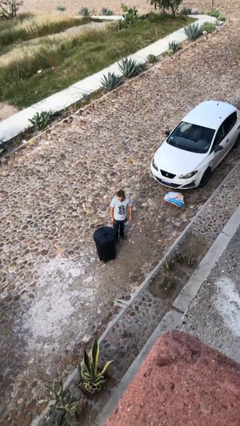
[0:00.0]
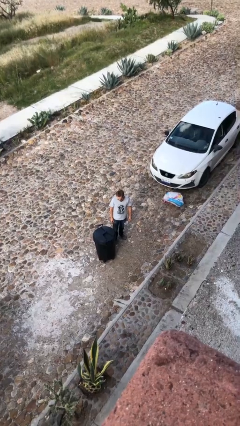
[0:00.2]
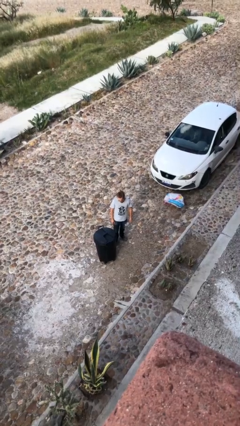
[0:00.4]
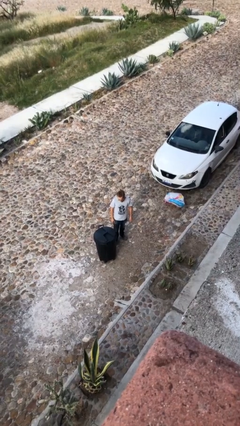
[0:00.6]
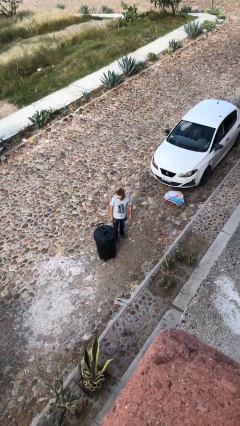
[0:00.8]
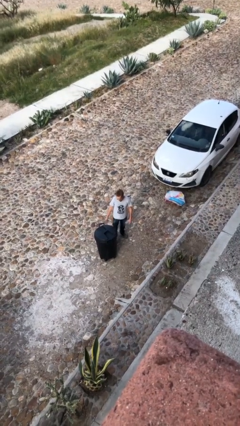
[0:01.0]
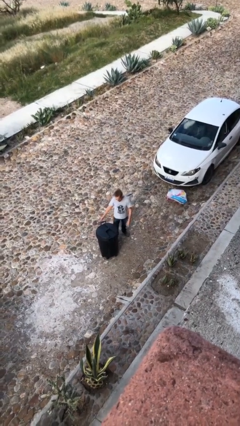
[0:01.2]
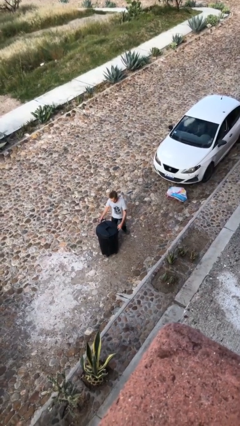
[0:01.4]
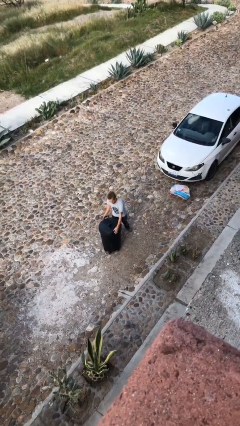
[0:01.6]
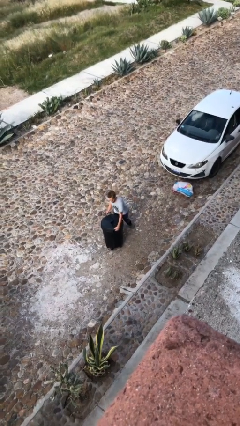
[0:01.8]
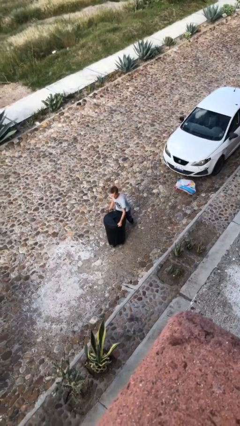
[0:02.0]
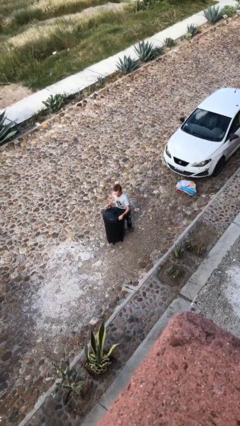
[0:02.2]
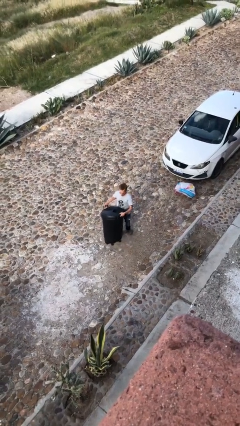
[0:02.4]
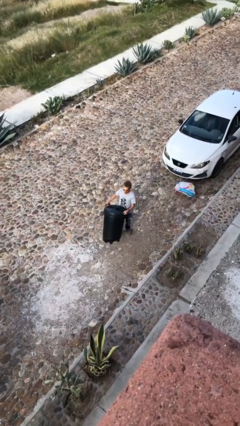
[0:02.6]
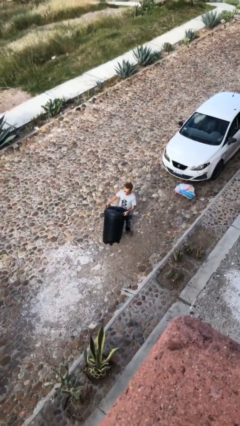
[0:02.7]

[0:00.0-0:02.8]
person picks up object from floor

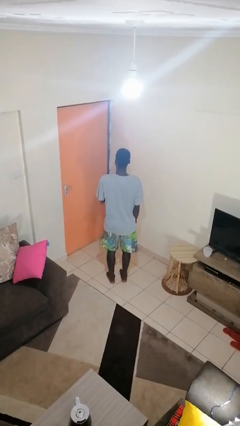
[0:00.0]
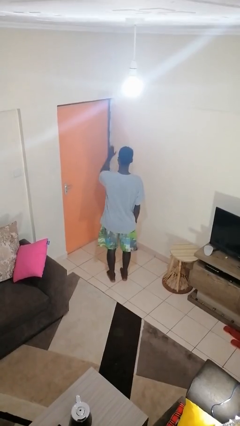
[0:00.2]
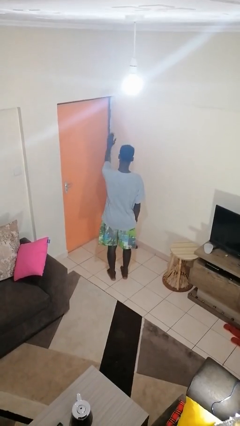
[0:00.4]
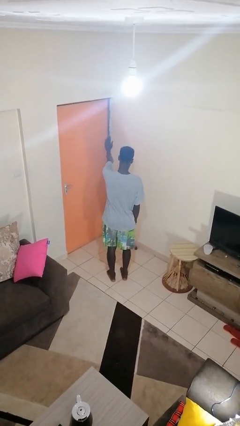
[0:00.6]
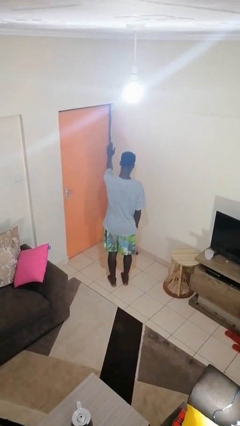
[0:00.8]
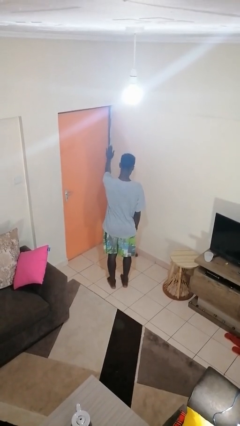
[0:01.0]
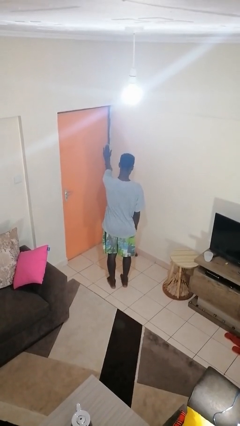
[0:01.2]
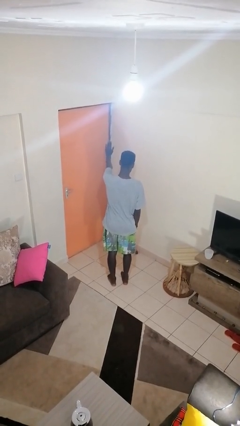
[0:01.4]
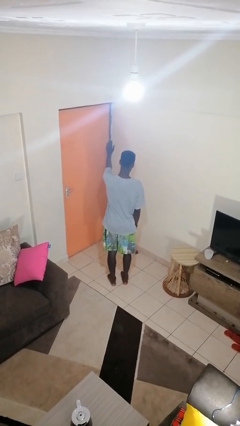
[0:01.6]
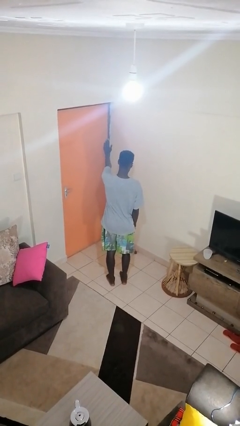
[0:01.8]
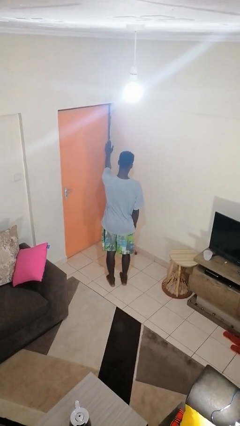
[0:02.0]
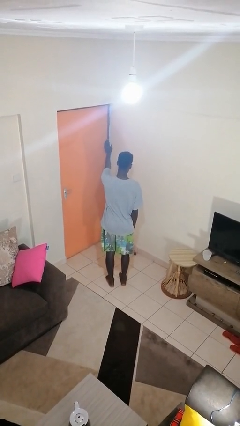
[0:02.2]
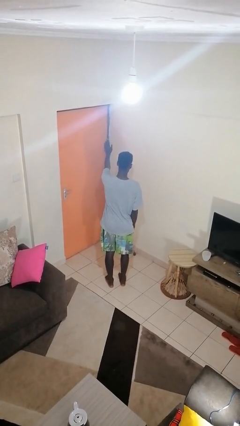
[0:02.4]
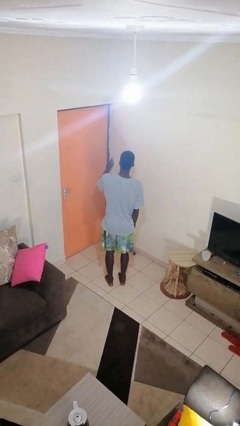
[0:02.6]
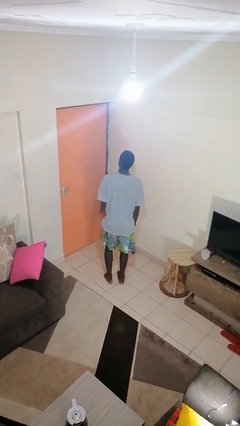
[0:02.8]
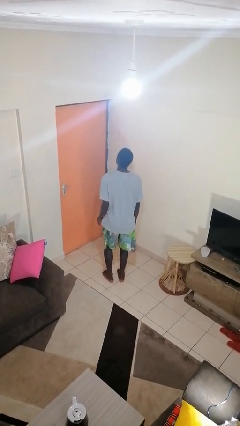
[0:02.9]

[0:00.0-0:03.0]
person gestures stop

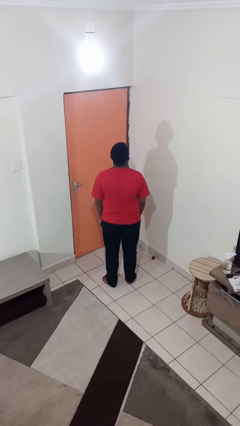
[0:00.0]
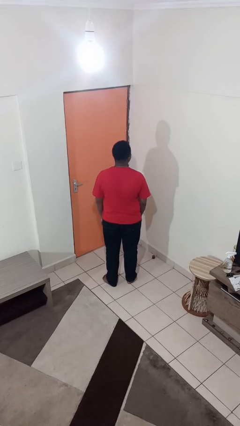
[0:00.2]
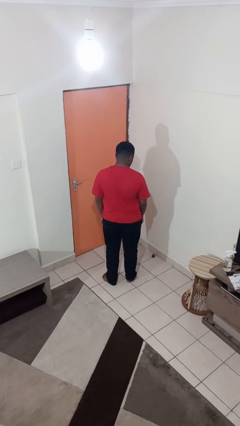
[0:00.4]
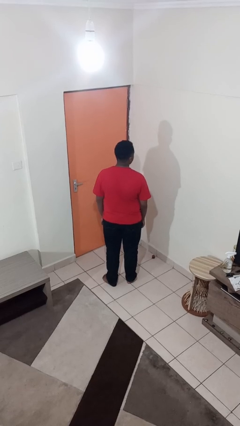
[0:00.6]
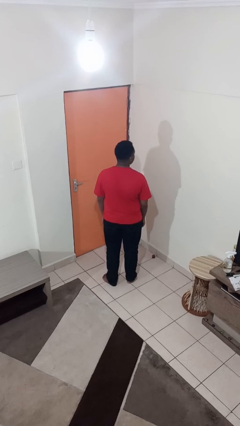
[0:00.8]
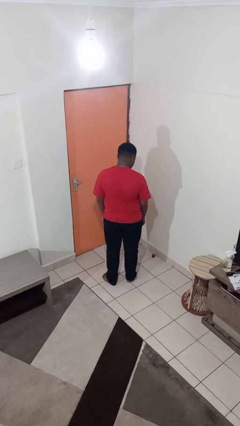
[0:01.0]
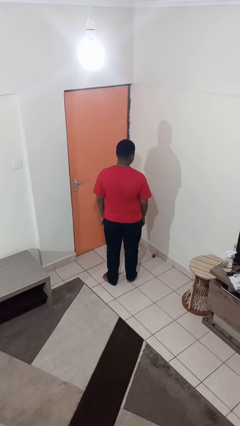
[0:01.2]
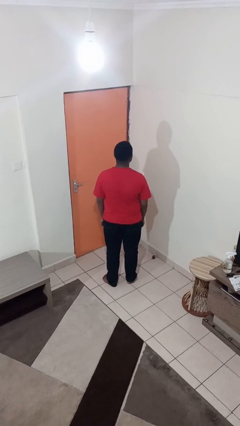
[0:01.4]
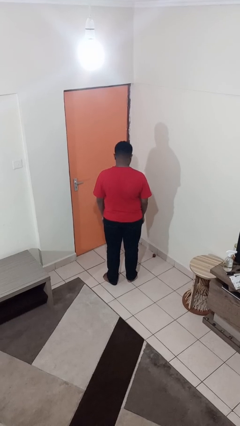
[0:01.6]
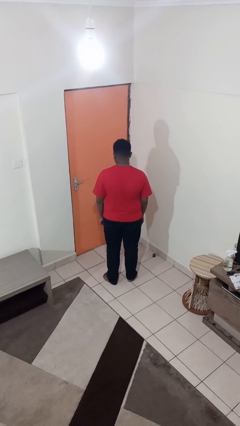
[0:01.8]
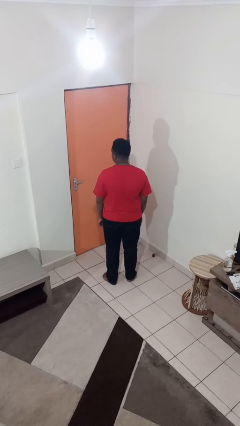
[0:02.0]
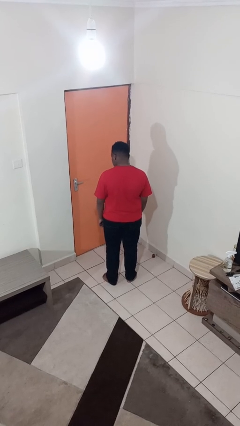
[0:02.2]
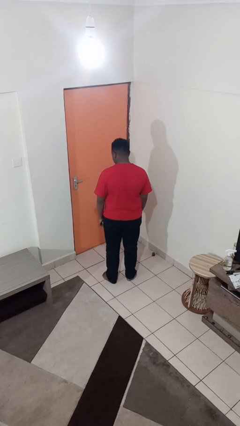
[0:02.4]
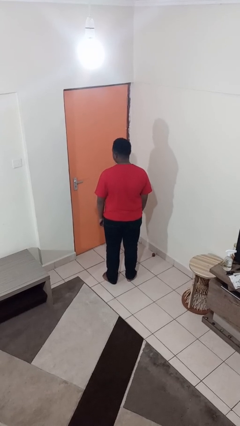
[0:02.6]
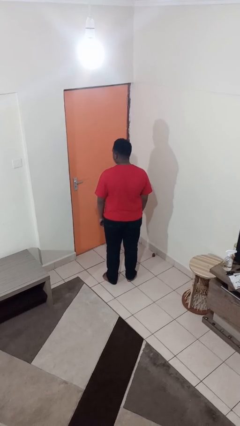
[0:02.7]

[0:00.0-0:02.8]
person nods head

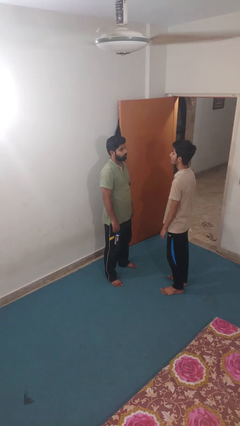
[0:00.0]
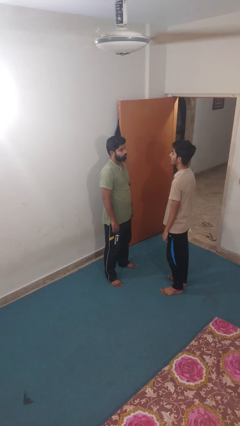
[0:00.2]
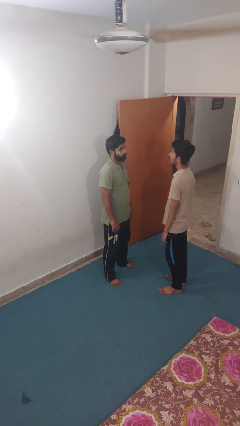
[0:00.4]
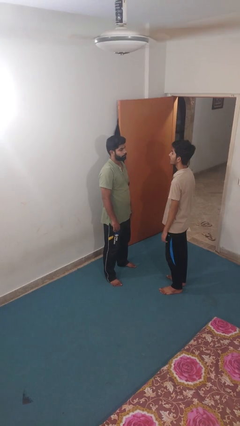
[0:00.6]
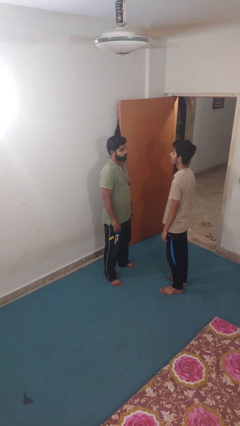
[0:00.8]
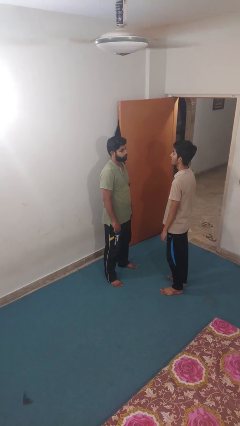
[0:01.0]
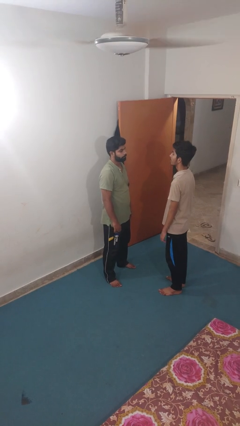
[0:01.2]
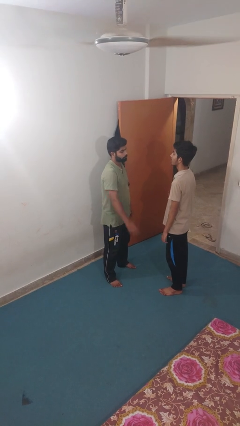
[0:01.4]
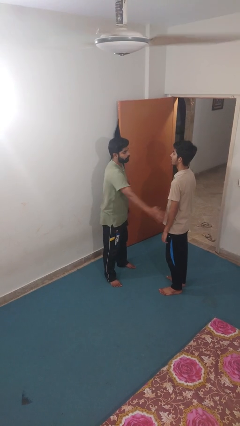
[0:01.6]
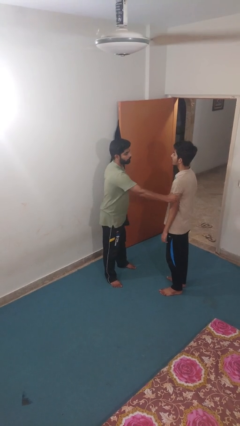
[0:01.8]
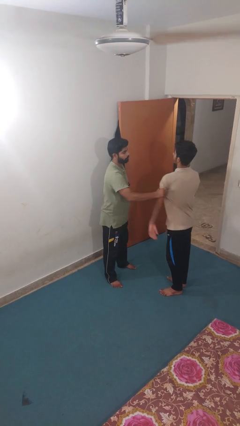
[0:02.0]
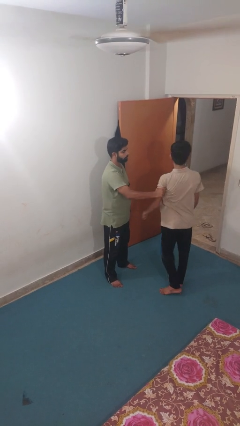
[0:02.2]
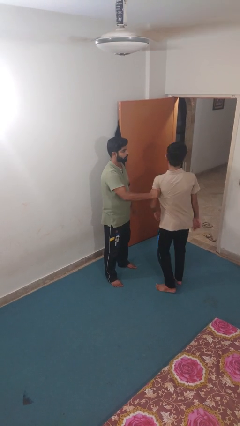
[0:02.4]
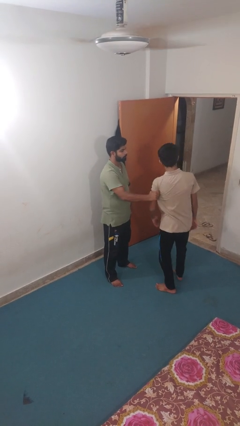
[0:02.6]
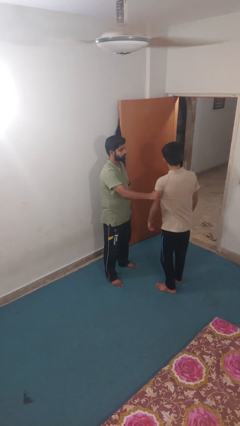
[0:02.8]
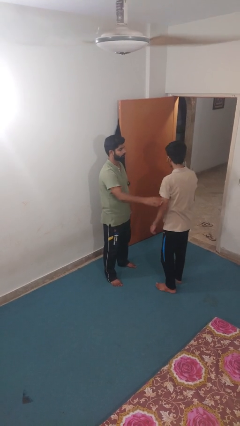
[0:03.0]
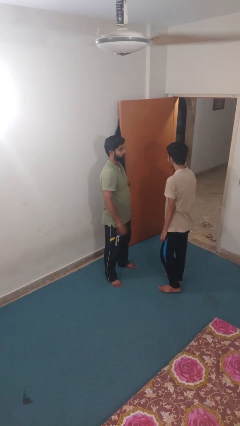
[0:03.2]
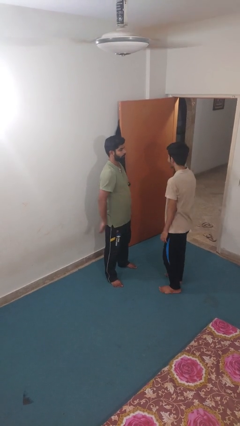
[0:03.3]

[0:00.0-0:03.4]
person grabs person by bicep

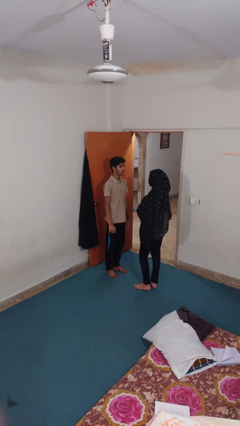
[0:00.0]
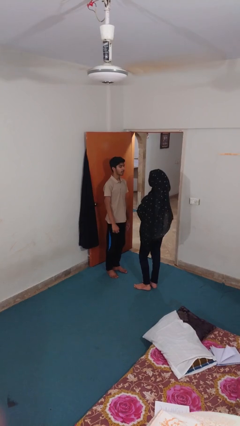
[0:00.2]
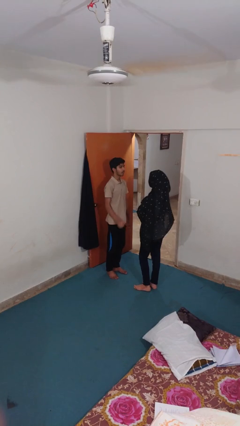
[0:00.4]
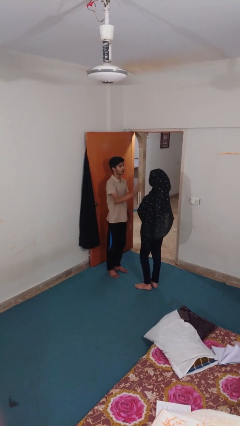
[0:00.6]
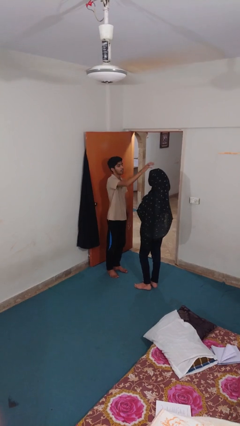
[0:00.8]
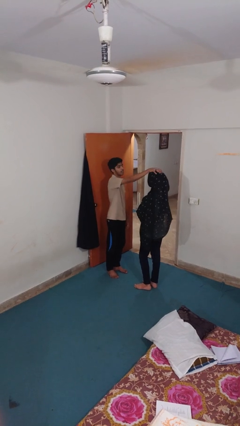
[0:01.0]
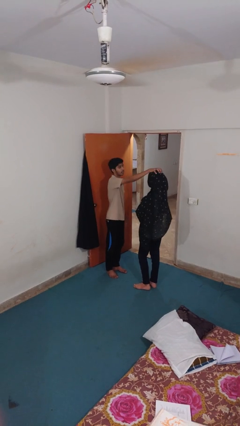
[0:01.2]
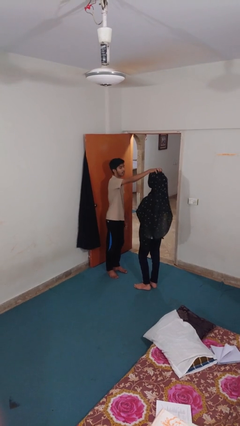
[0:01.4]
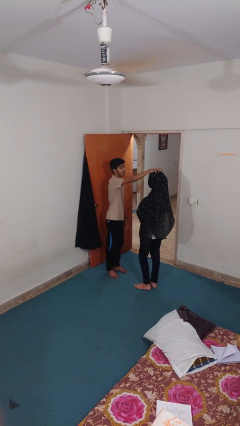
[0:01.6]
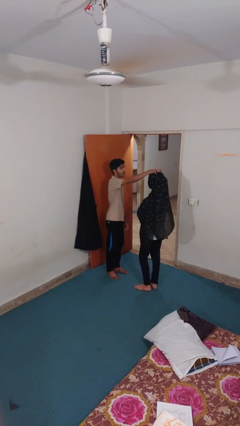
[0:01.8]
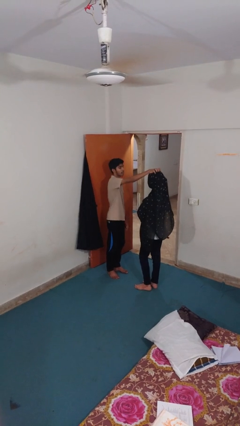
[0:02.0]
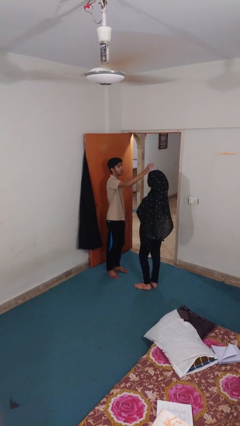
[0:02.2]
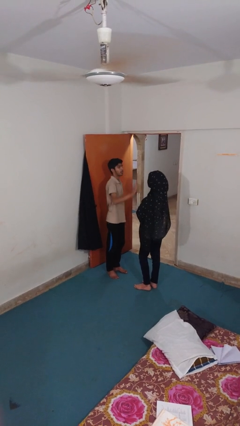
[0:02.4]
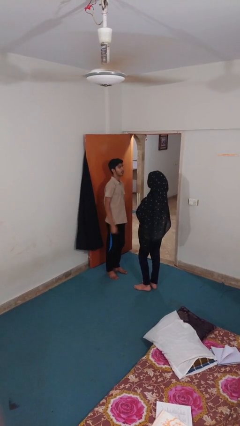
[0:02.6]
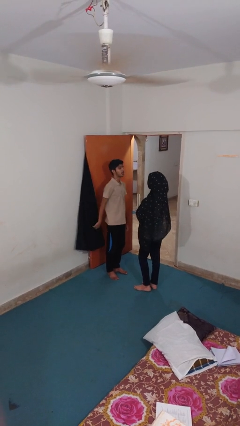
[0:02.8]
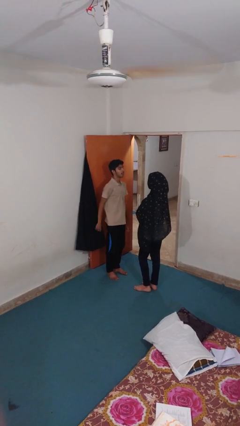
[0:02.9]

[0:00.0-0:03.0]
person grabs person by hair

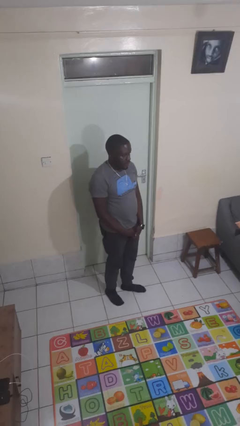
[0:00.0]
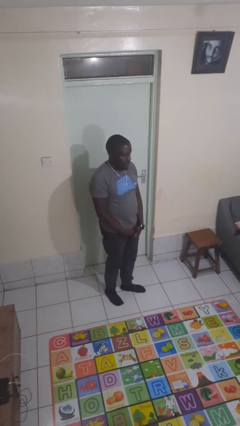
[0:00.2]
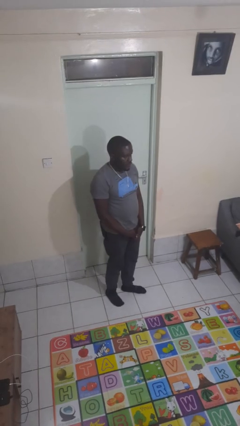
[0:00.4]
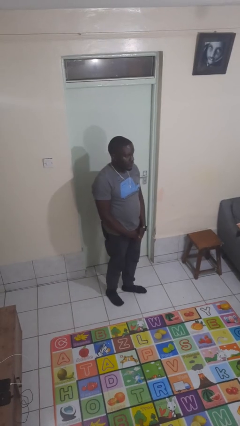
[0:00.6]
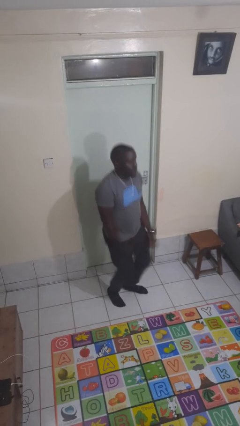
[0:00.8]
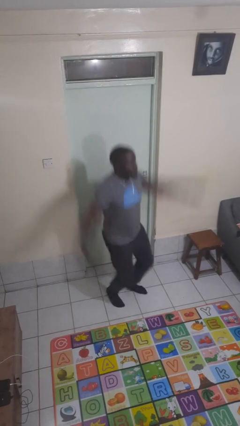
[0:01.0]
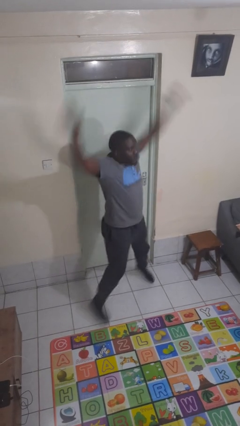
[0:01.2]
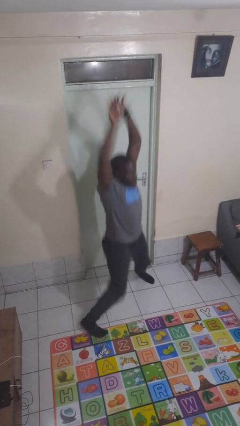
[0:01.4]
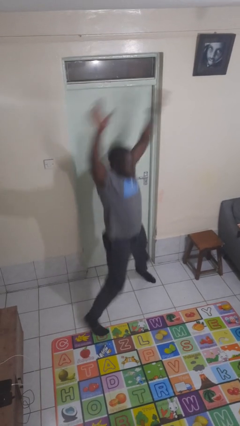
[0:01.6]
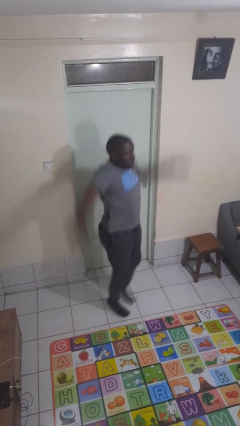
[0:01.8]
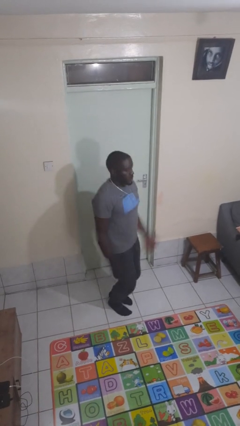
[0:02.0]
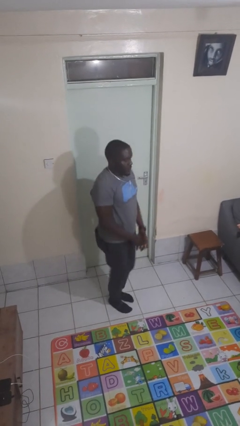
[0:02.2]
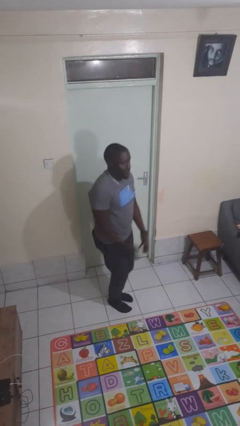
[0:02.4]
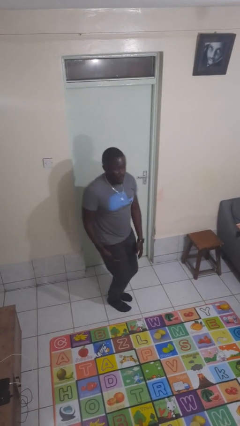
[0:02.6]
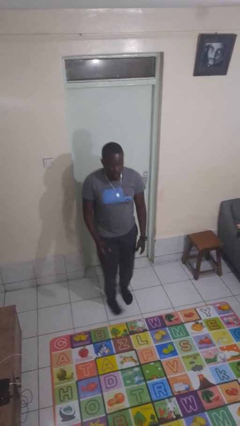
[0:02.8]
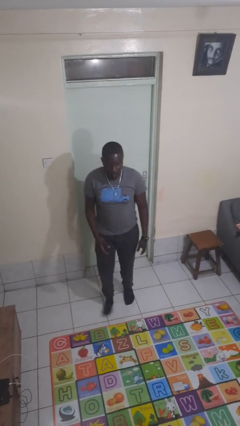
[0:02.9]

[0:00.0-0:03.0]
person exercises with jumping jacks
